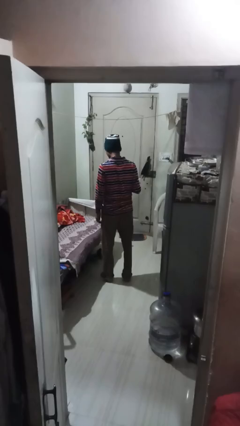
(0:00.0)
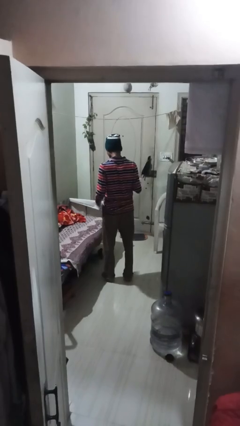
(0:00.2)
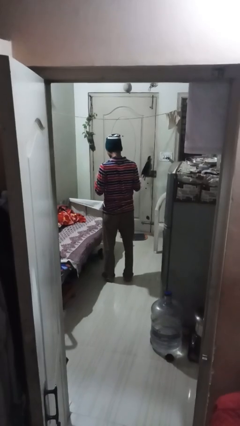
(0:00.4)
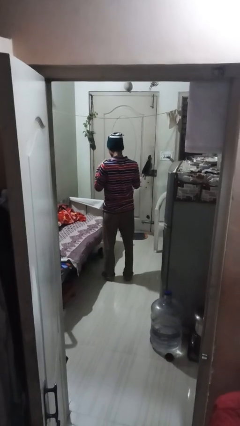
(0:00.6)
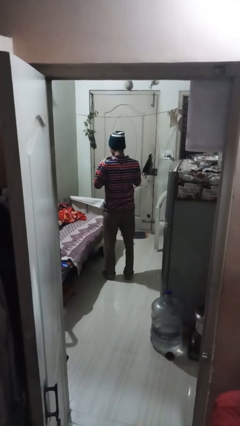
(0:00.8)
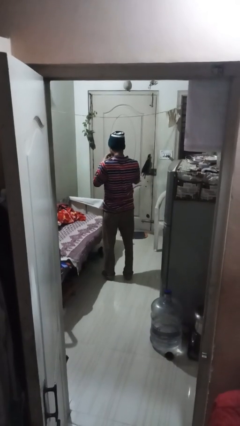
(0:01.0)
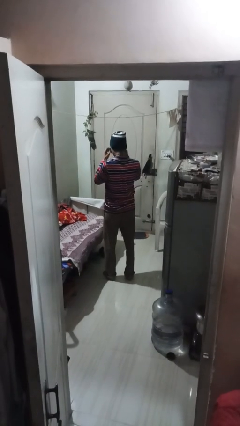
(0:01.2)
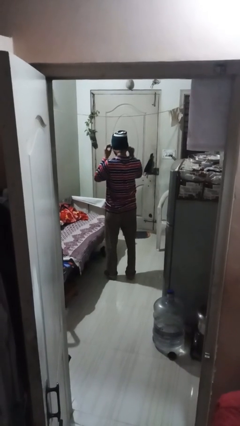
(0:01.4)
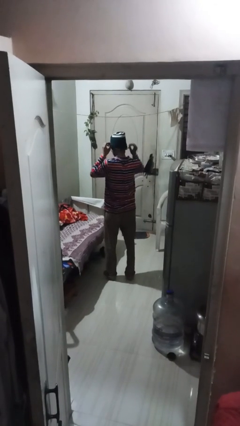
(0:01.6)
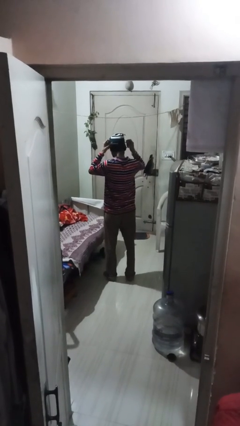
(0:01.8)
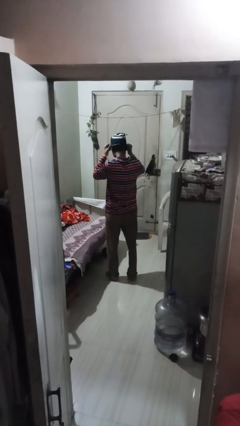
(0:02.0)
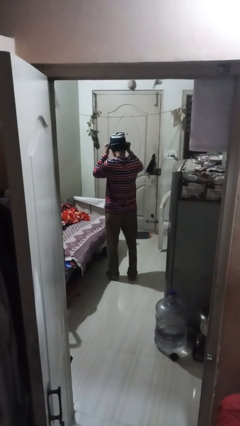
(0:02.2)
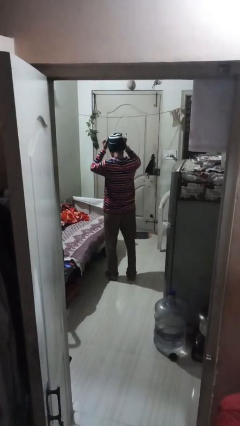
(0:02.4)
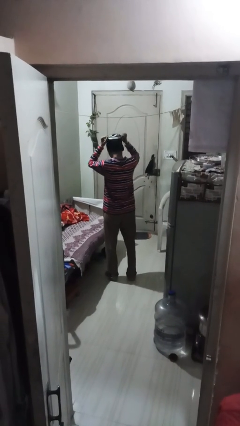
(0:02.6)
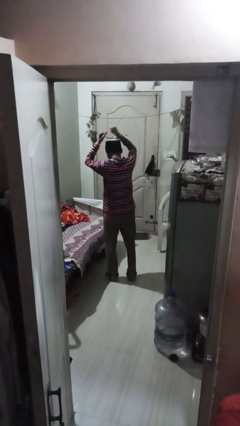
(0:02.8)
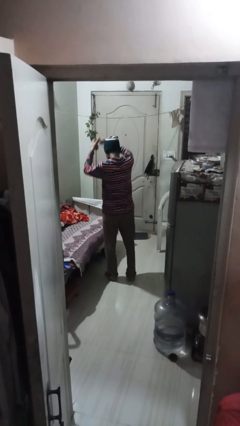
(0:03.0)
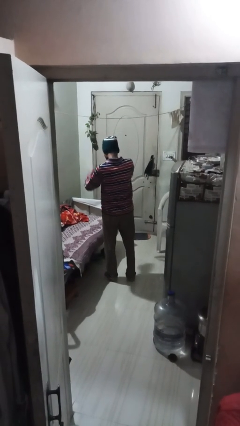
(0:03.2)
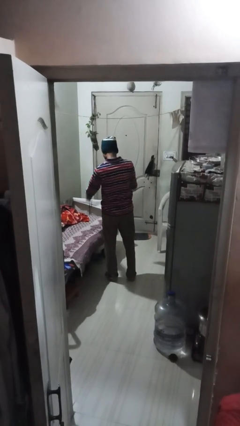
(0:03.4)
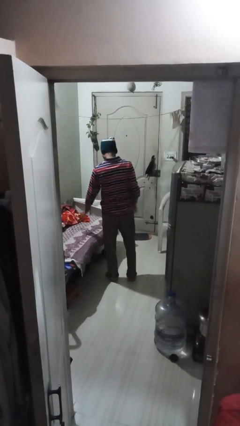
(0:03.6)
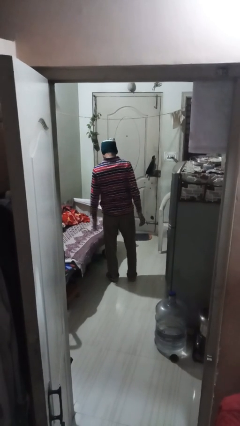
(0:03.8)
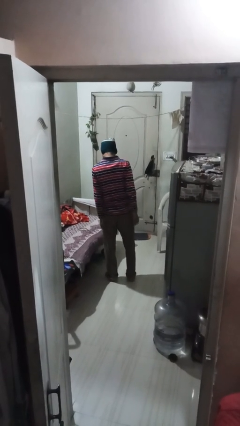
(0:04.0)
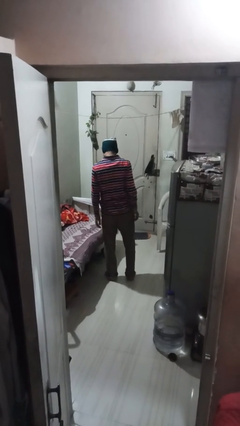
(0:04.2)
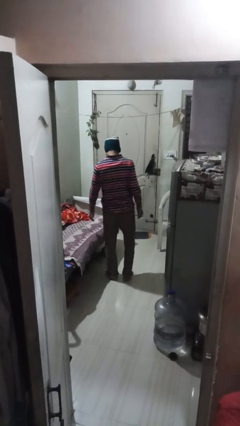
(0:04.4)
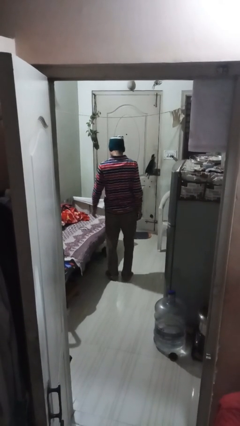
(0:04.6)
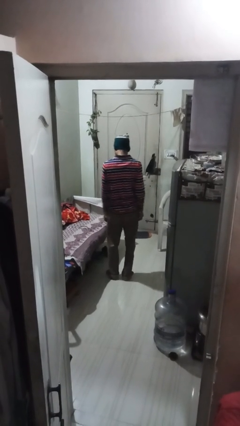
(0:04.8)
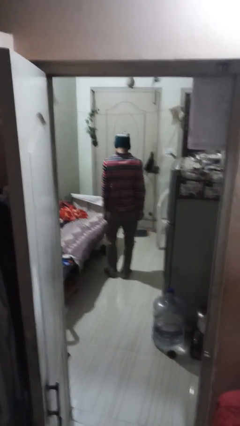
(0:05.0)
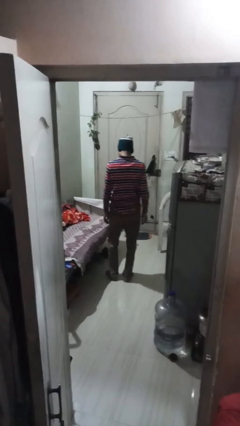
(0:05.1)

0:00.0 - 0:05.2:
person takes off necklace

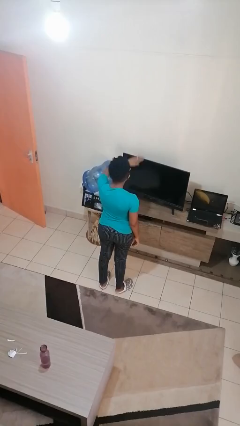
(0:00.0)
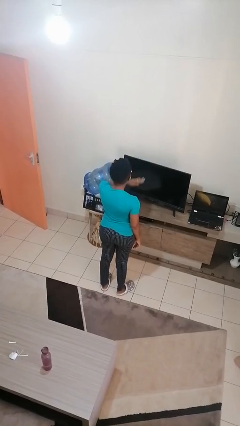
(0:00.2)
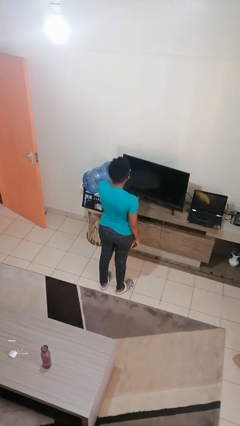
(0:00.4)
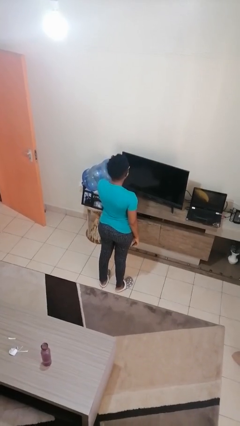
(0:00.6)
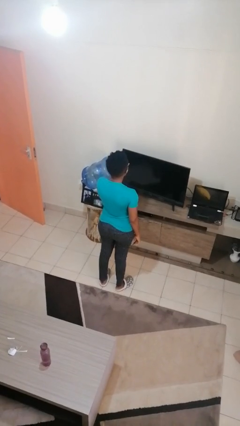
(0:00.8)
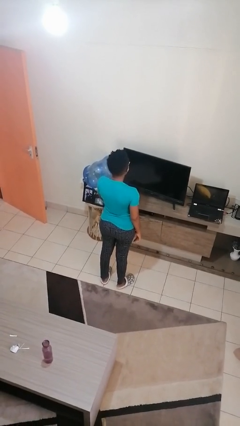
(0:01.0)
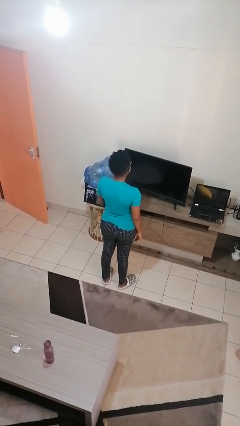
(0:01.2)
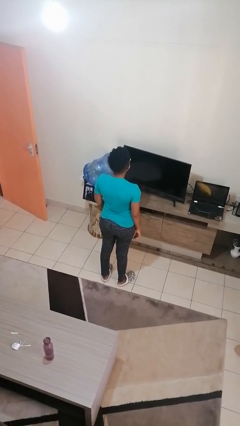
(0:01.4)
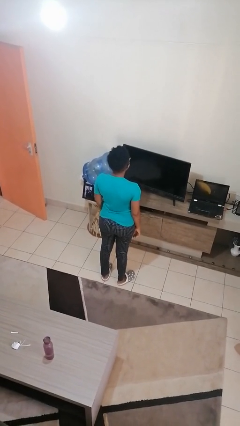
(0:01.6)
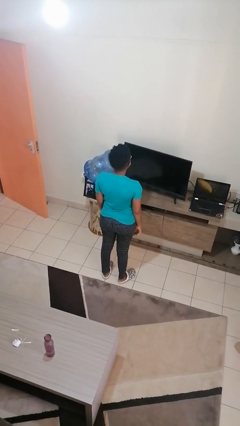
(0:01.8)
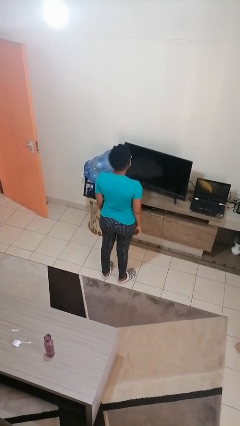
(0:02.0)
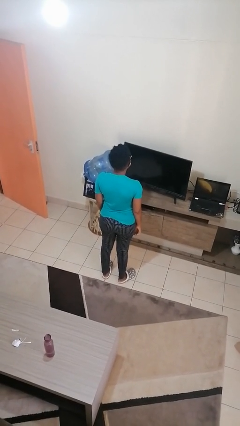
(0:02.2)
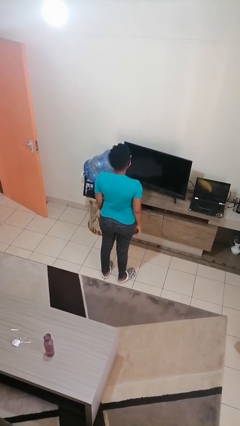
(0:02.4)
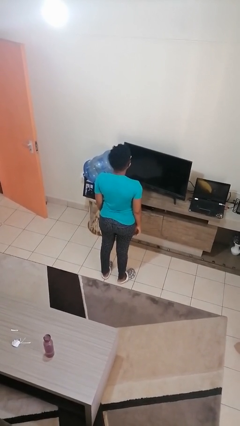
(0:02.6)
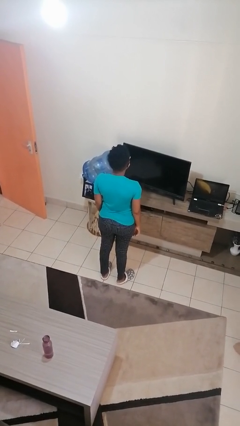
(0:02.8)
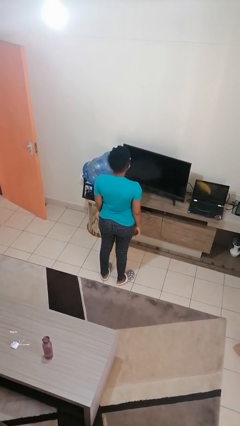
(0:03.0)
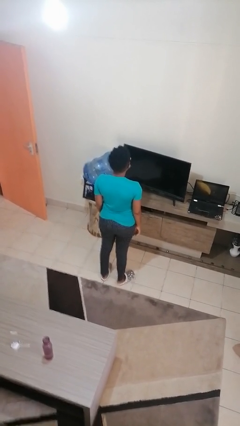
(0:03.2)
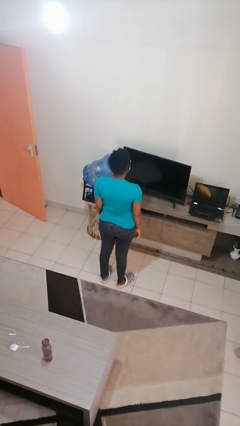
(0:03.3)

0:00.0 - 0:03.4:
person gestures swipe down

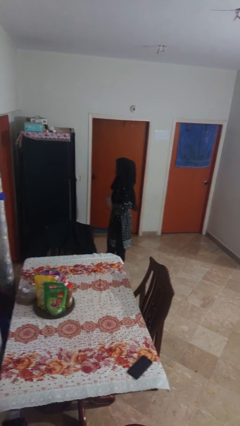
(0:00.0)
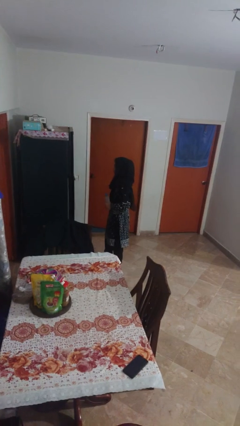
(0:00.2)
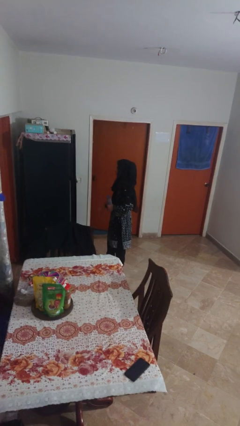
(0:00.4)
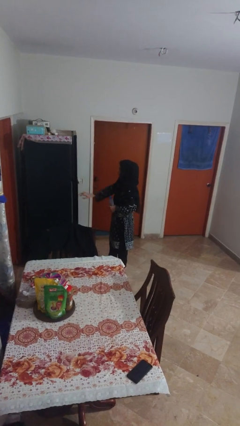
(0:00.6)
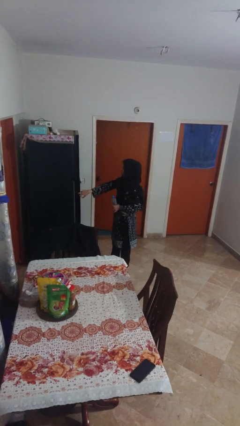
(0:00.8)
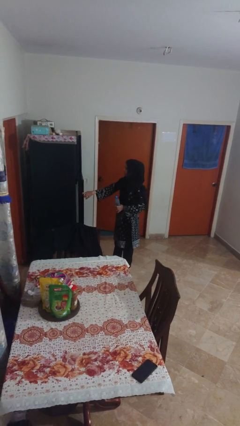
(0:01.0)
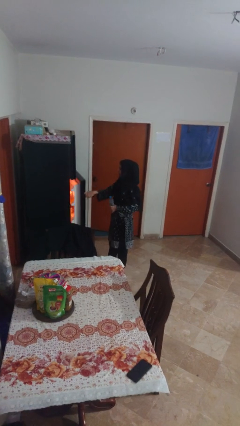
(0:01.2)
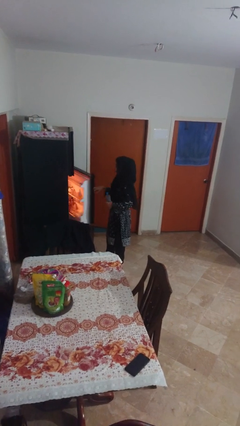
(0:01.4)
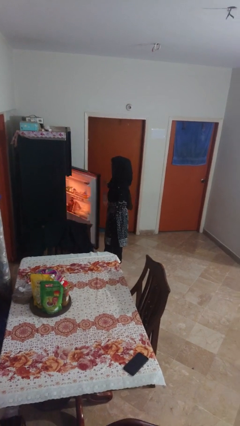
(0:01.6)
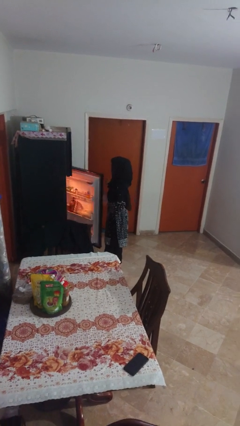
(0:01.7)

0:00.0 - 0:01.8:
person opens refrigerator

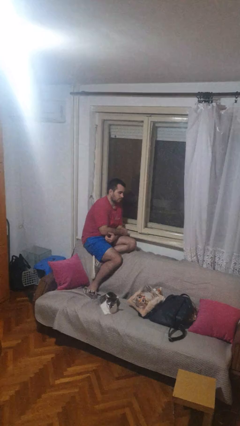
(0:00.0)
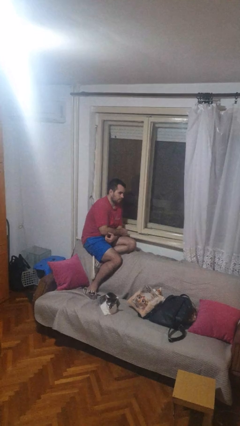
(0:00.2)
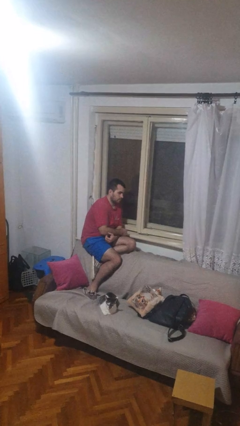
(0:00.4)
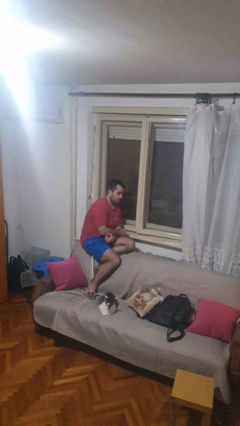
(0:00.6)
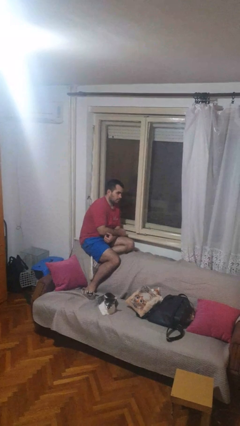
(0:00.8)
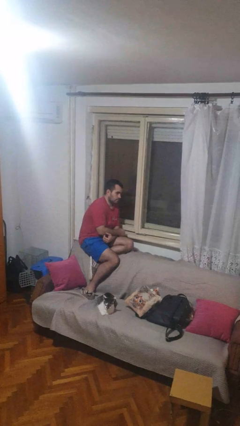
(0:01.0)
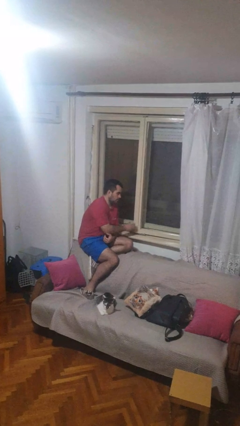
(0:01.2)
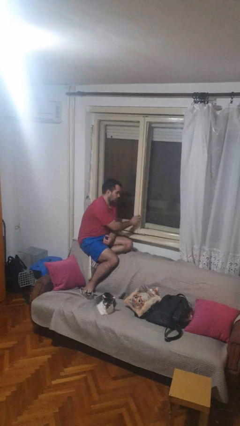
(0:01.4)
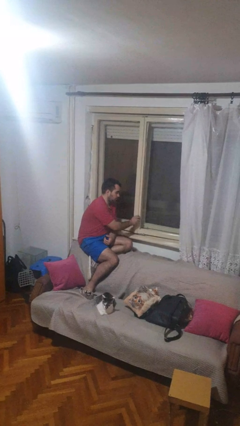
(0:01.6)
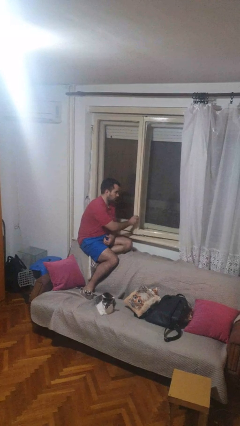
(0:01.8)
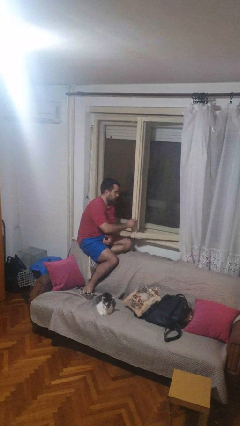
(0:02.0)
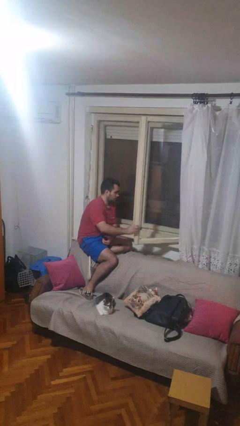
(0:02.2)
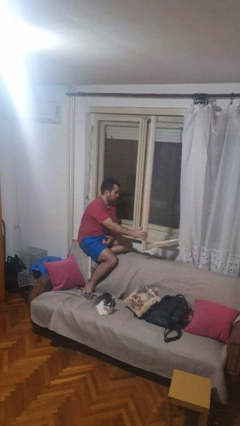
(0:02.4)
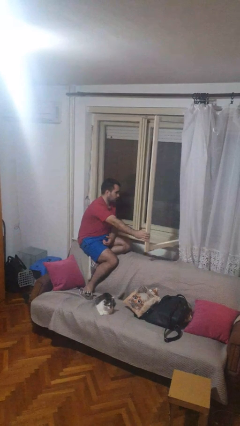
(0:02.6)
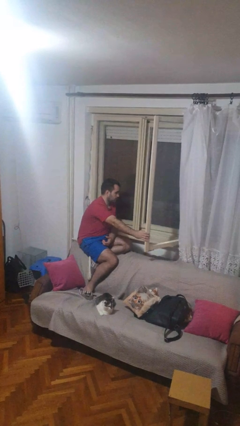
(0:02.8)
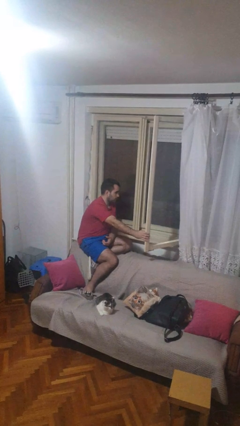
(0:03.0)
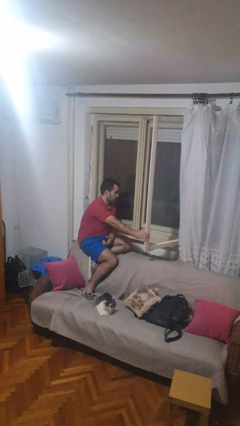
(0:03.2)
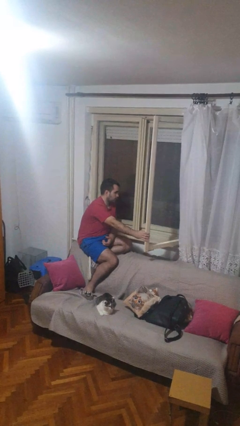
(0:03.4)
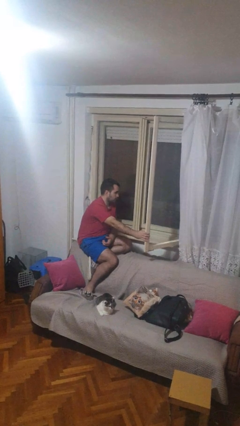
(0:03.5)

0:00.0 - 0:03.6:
person opens home window

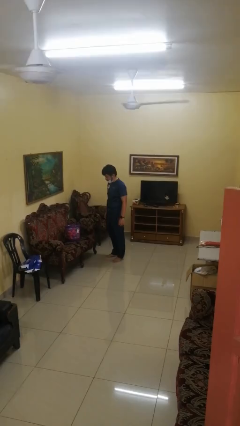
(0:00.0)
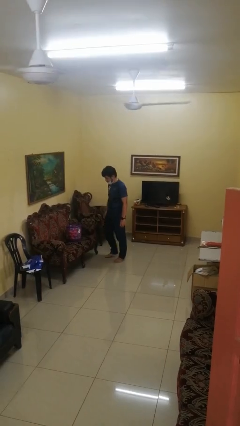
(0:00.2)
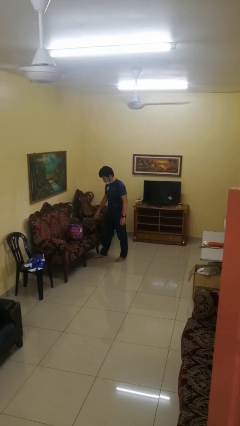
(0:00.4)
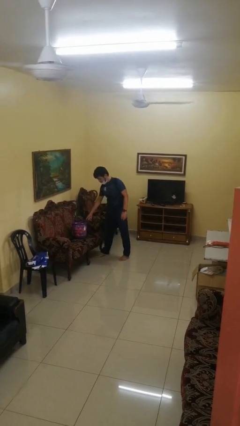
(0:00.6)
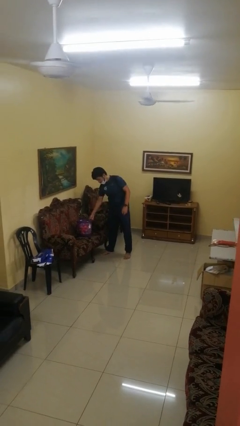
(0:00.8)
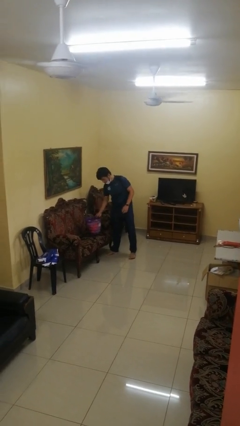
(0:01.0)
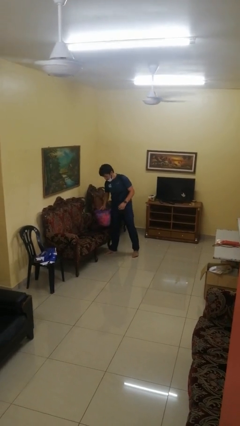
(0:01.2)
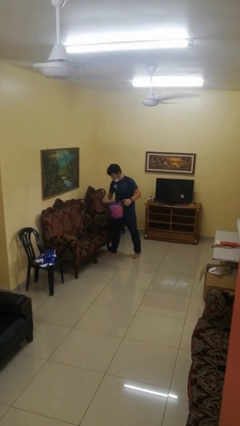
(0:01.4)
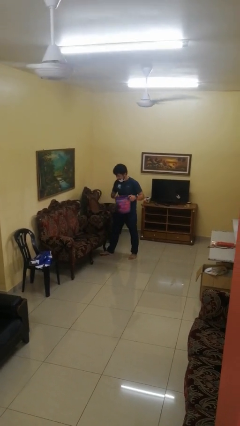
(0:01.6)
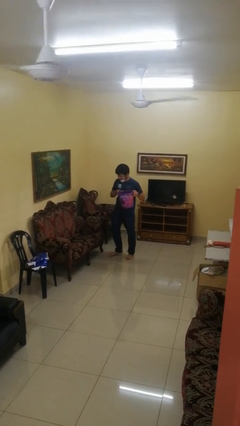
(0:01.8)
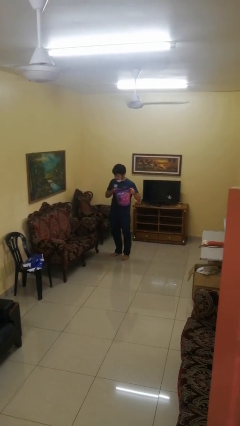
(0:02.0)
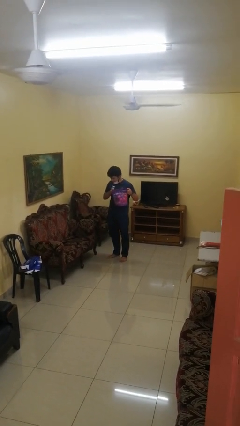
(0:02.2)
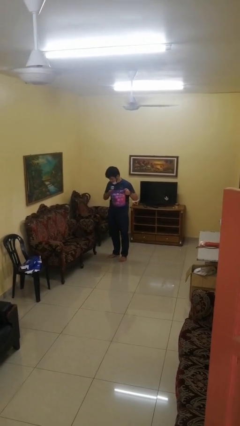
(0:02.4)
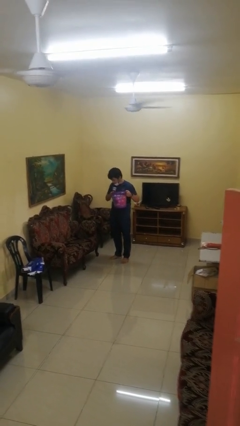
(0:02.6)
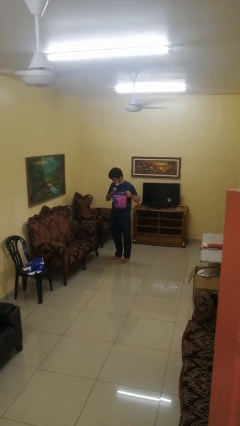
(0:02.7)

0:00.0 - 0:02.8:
person picks up object from couch

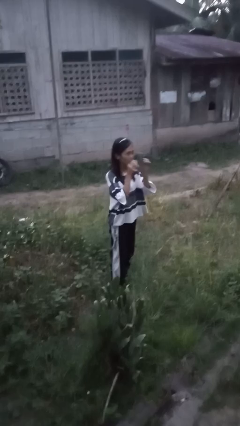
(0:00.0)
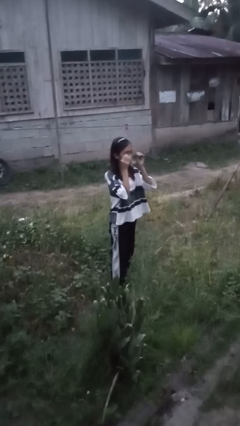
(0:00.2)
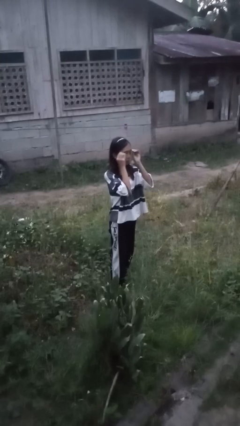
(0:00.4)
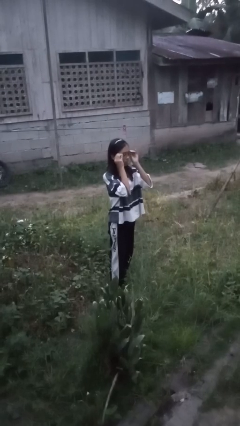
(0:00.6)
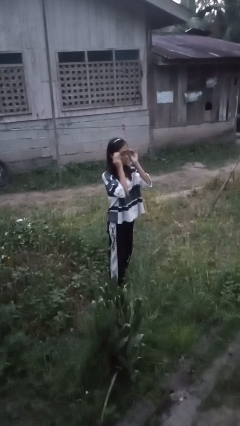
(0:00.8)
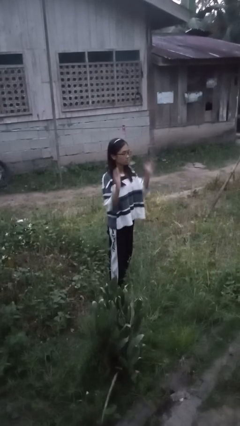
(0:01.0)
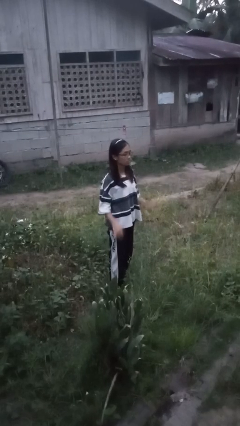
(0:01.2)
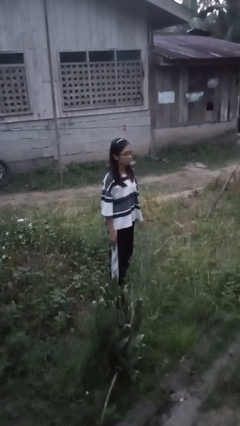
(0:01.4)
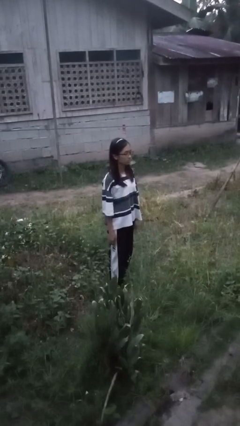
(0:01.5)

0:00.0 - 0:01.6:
person puts on glasses
